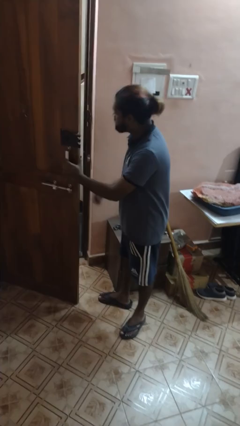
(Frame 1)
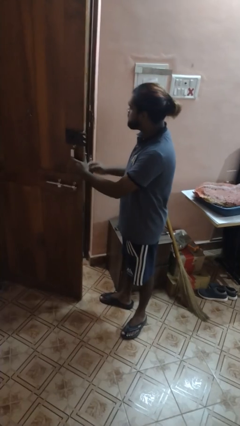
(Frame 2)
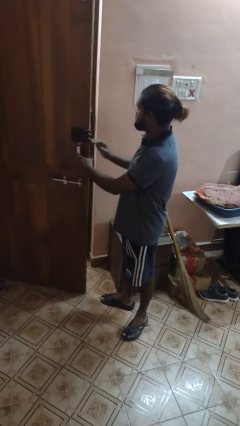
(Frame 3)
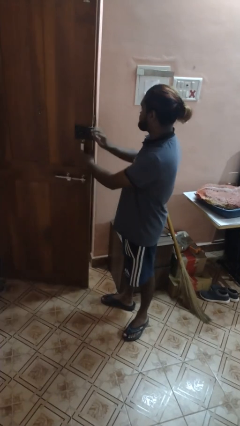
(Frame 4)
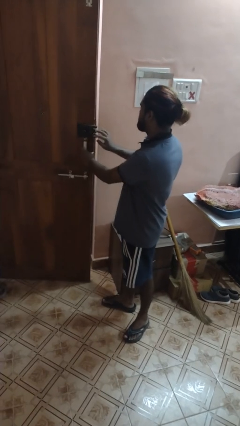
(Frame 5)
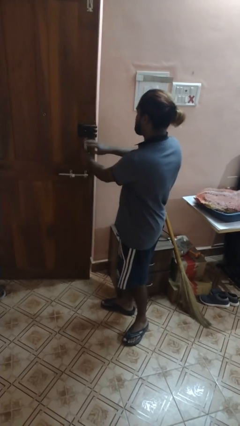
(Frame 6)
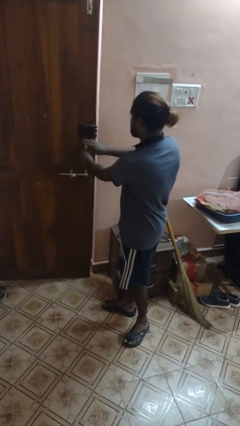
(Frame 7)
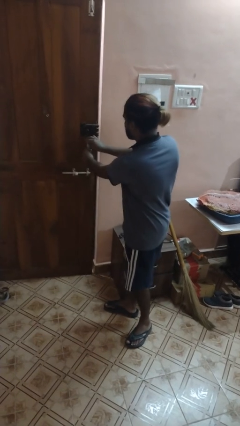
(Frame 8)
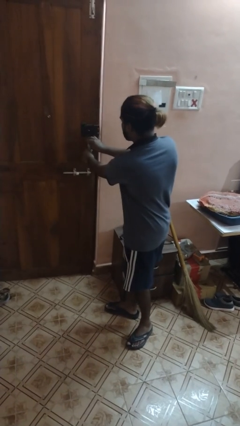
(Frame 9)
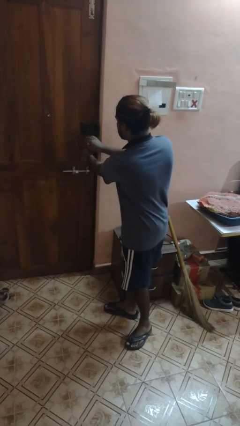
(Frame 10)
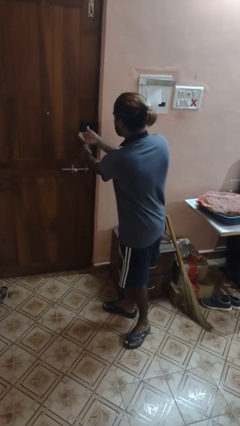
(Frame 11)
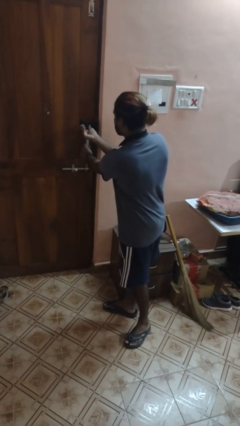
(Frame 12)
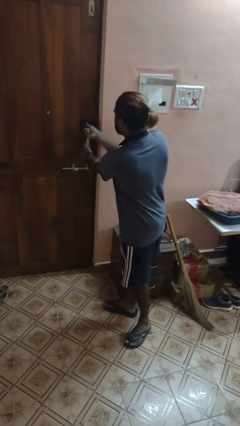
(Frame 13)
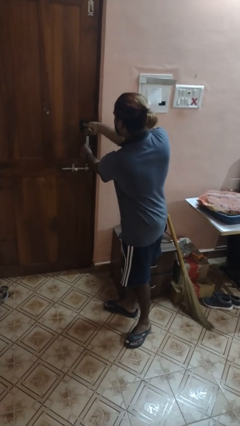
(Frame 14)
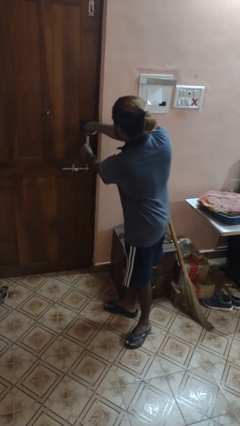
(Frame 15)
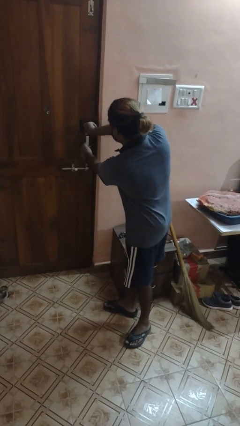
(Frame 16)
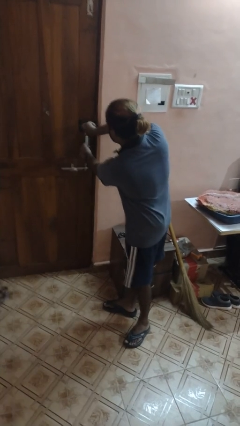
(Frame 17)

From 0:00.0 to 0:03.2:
person closes facility door

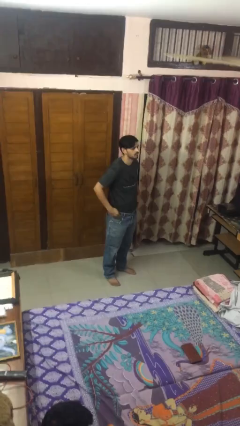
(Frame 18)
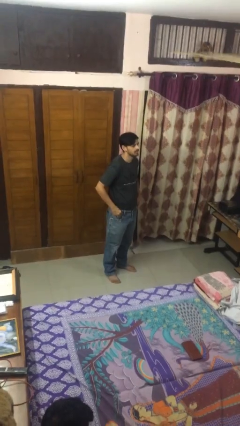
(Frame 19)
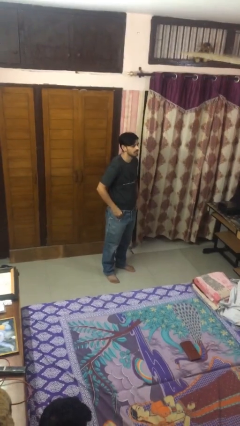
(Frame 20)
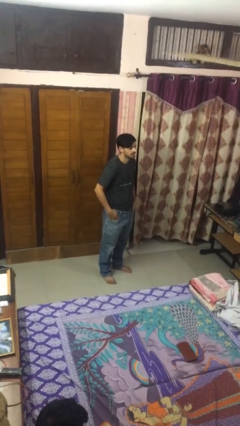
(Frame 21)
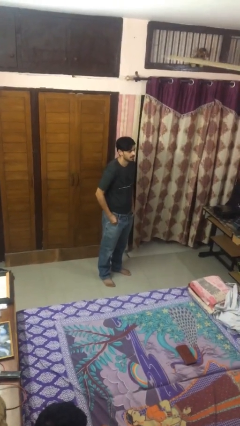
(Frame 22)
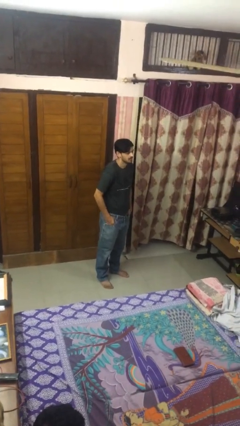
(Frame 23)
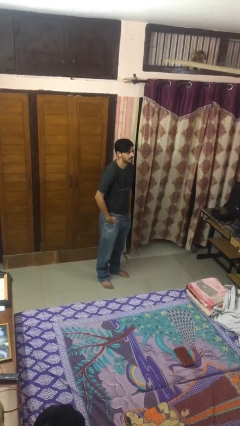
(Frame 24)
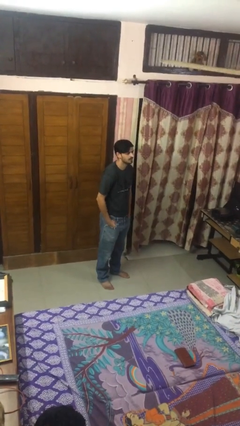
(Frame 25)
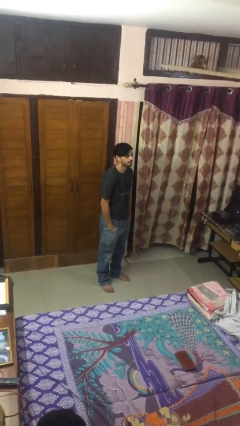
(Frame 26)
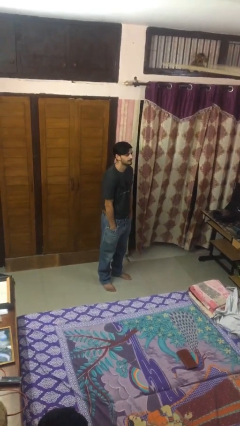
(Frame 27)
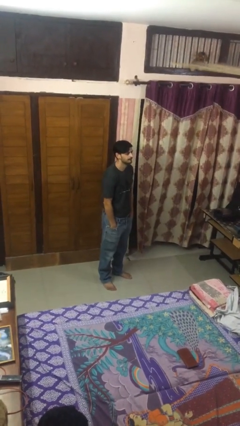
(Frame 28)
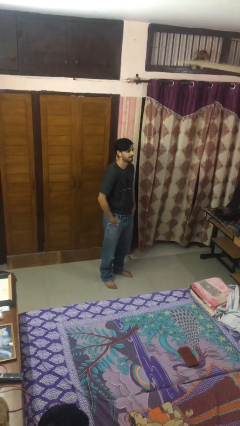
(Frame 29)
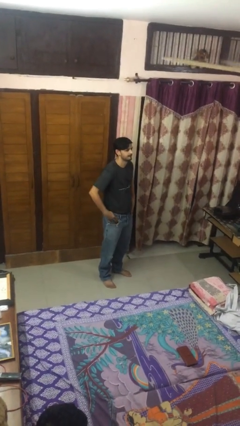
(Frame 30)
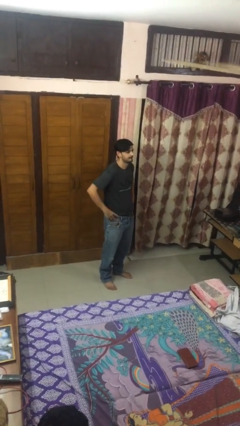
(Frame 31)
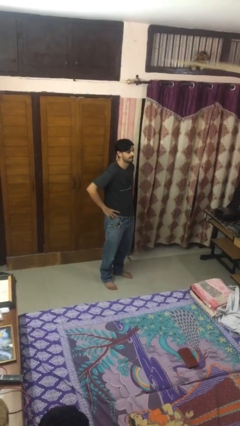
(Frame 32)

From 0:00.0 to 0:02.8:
person puts hands in back pockets

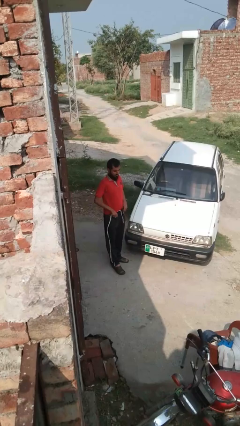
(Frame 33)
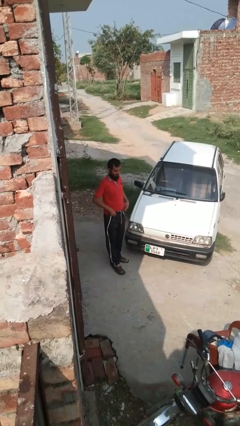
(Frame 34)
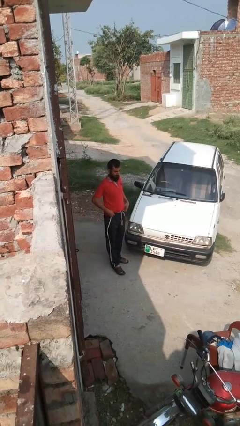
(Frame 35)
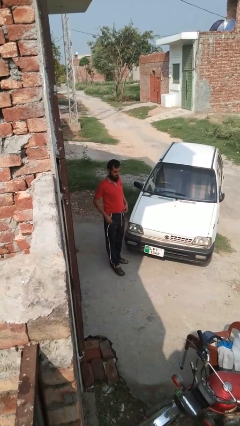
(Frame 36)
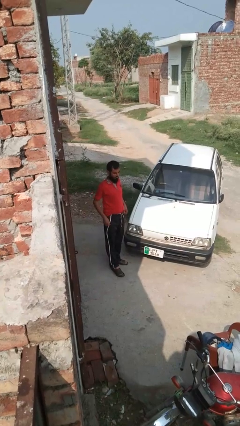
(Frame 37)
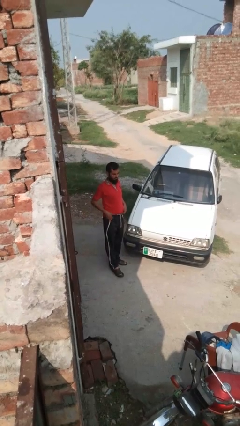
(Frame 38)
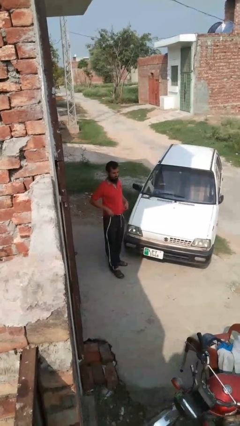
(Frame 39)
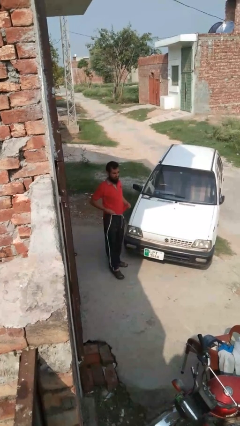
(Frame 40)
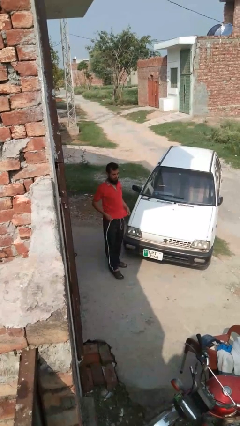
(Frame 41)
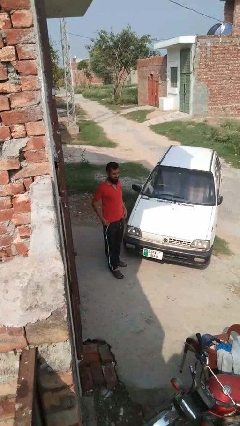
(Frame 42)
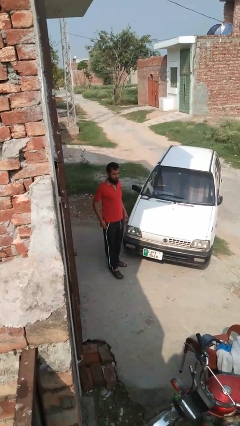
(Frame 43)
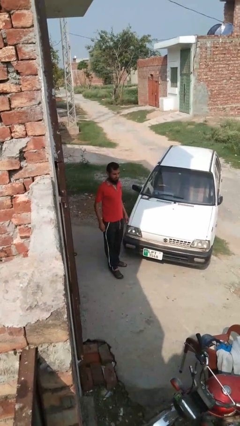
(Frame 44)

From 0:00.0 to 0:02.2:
person untucks shirt

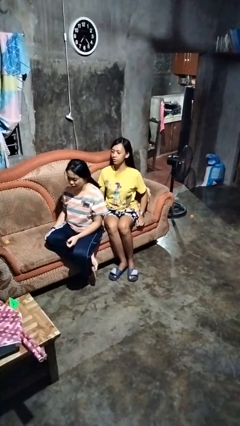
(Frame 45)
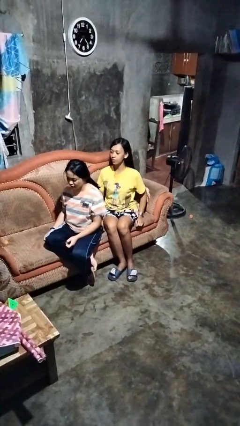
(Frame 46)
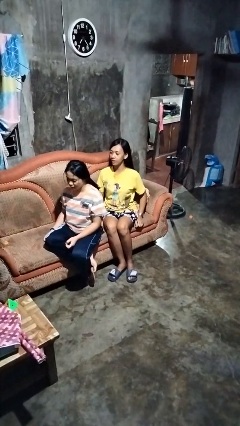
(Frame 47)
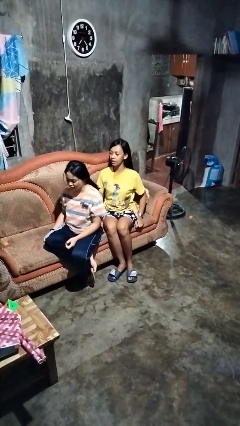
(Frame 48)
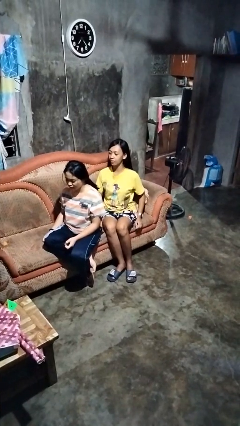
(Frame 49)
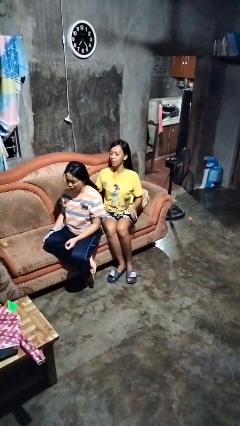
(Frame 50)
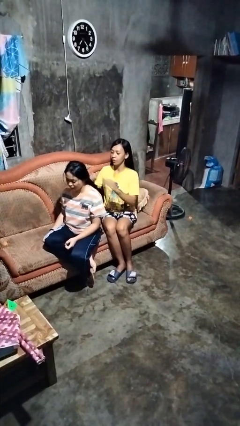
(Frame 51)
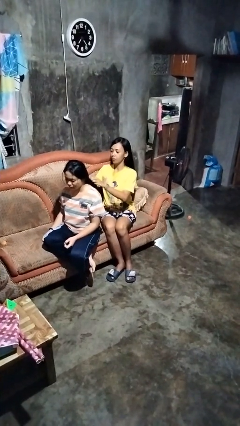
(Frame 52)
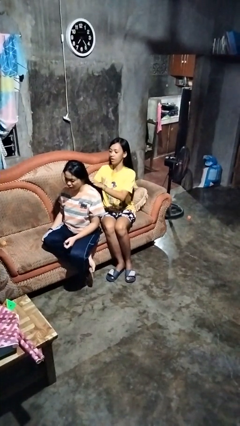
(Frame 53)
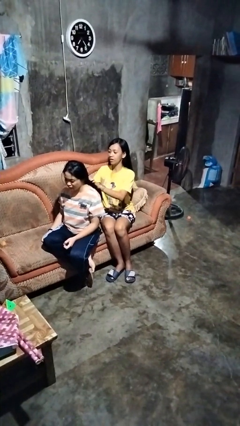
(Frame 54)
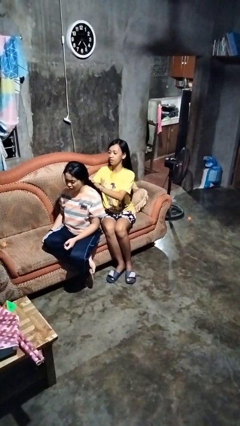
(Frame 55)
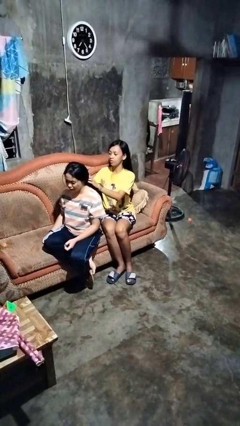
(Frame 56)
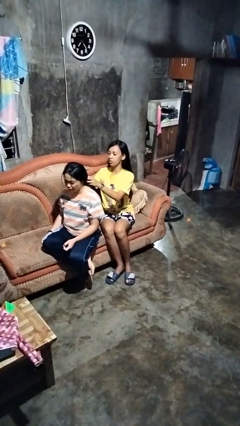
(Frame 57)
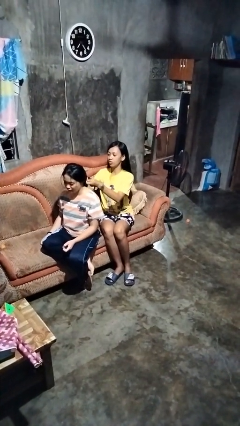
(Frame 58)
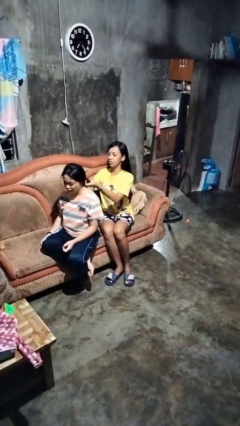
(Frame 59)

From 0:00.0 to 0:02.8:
person braids hair of person

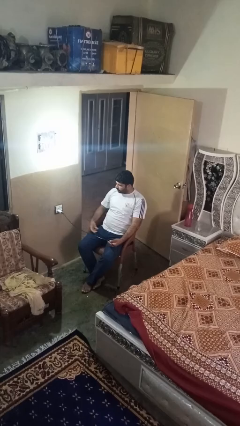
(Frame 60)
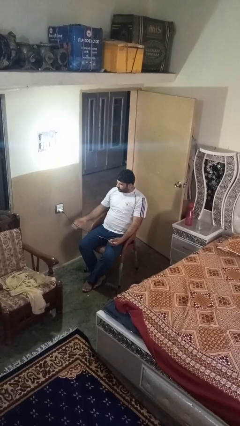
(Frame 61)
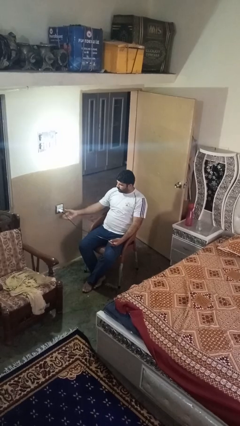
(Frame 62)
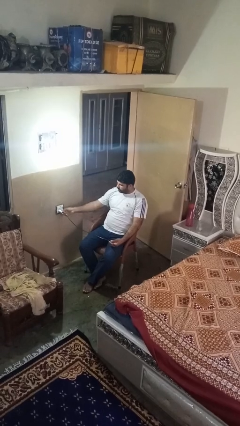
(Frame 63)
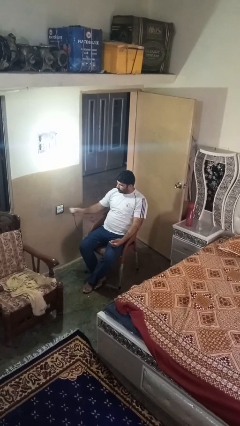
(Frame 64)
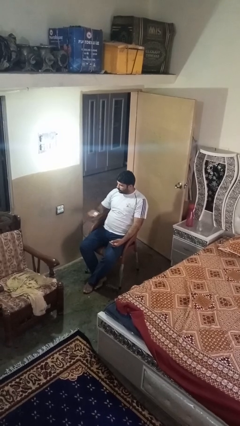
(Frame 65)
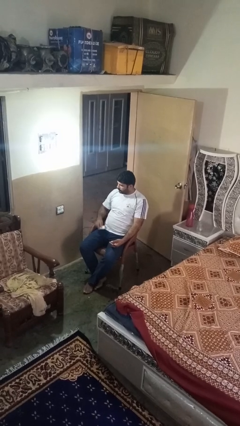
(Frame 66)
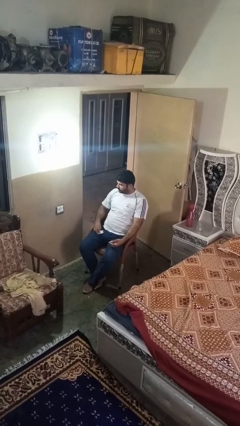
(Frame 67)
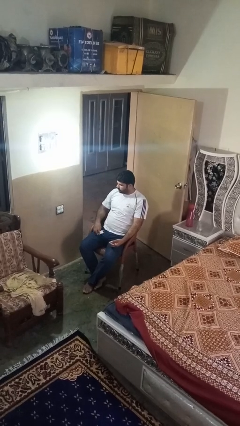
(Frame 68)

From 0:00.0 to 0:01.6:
person unplugs from electrical socket

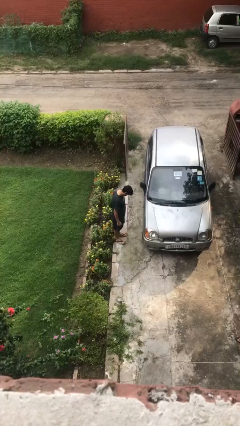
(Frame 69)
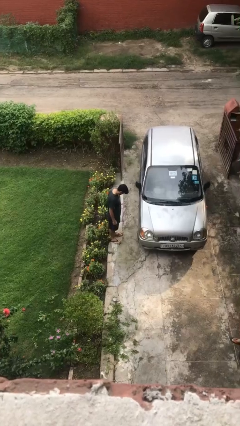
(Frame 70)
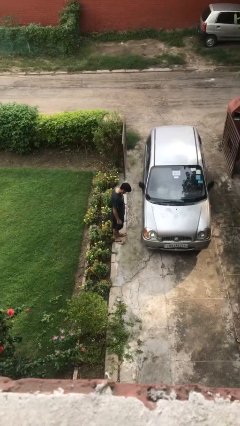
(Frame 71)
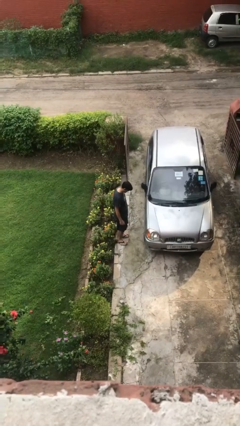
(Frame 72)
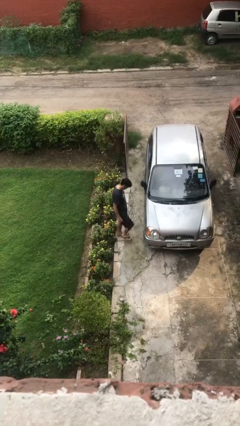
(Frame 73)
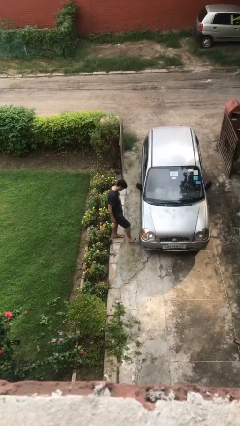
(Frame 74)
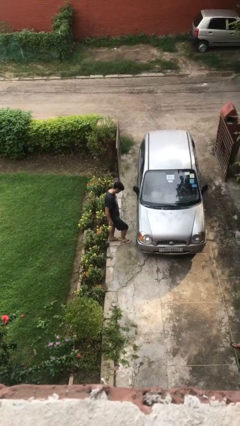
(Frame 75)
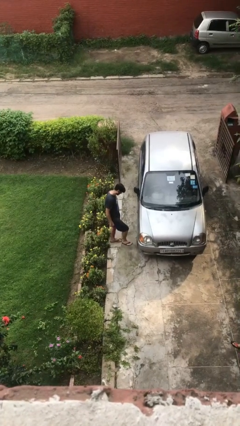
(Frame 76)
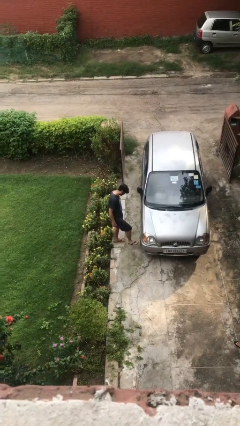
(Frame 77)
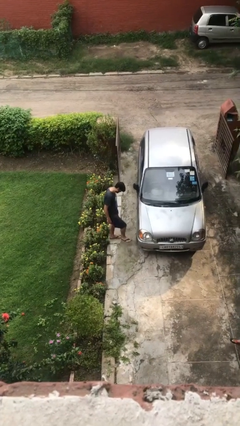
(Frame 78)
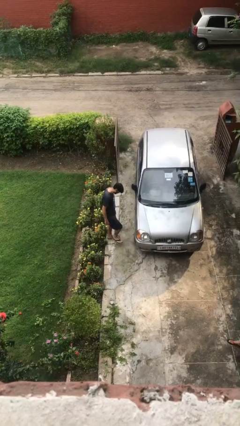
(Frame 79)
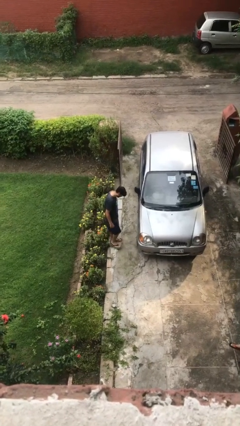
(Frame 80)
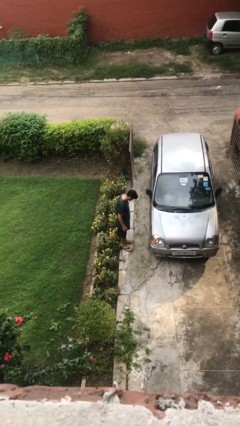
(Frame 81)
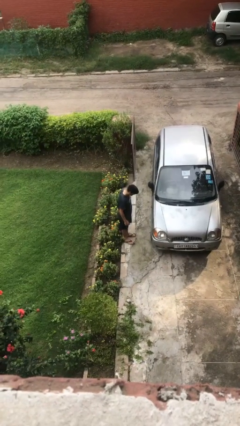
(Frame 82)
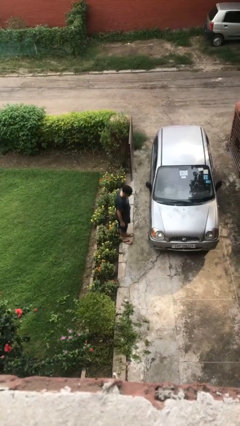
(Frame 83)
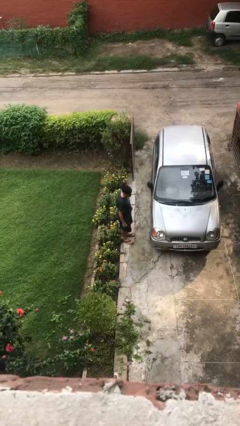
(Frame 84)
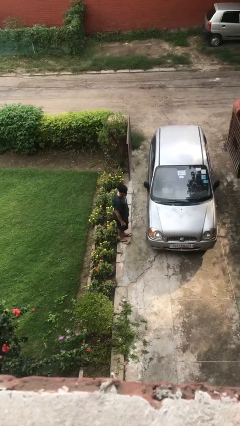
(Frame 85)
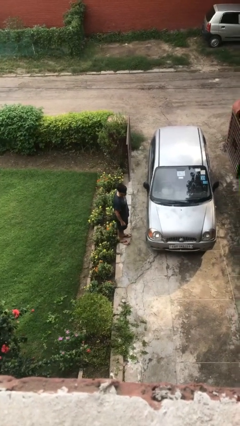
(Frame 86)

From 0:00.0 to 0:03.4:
person kicks car tires

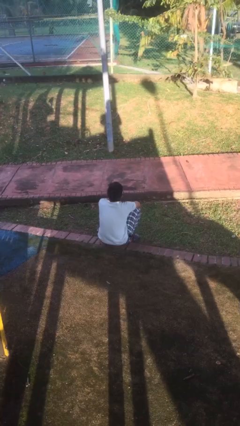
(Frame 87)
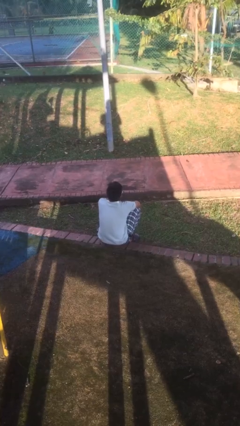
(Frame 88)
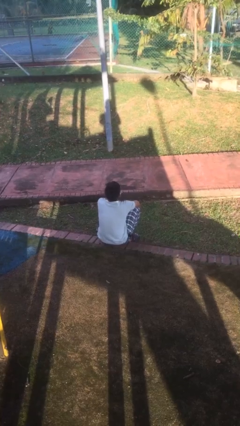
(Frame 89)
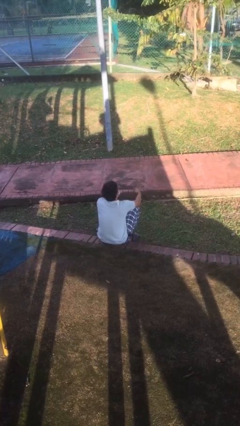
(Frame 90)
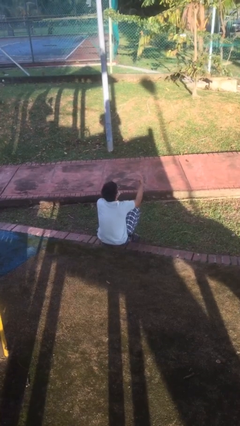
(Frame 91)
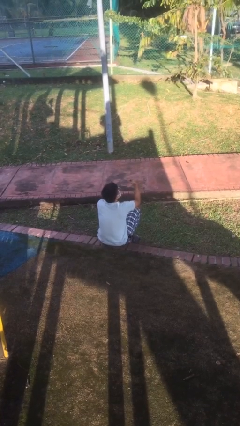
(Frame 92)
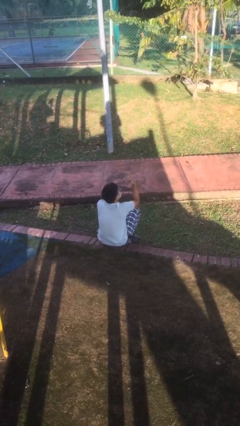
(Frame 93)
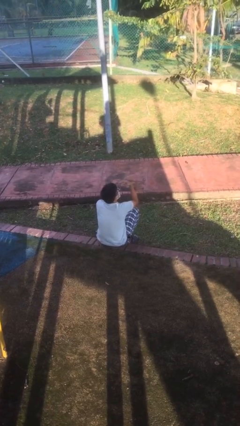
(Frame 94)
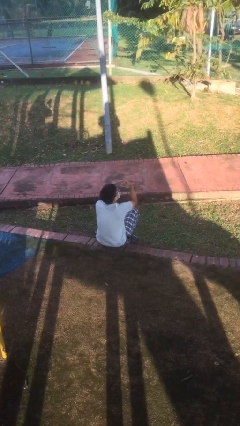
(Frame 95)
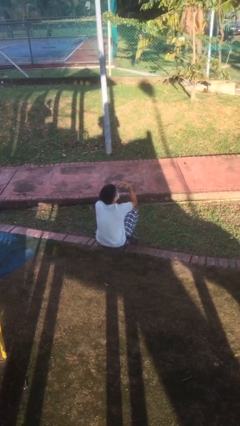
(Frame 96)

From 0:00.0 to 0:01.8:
person gestures watch closely
